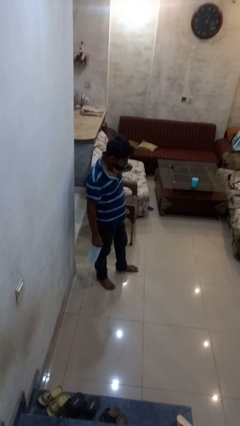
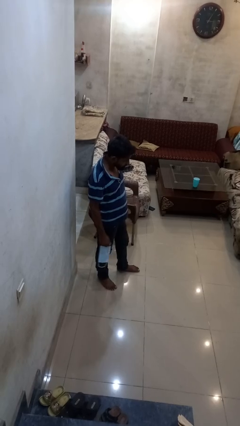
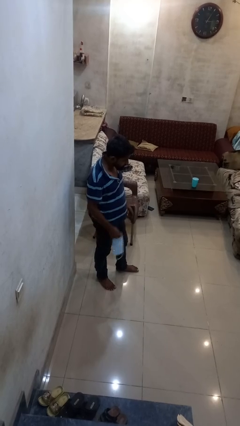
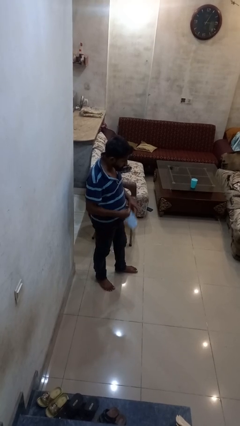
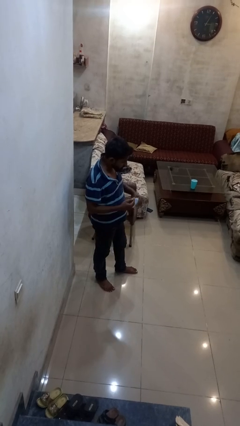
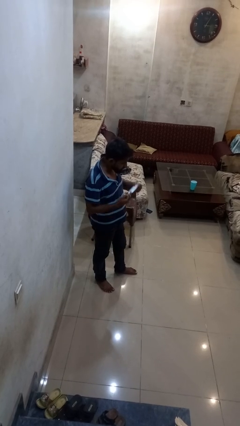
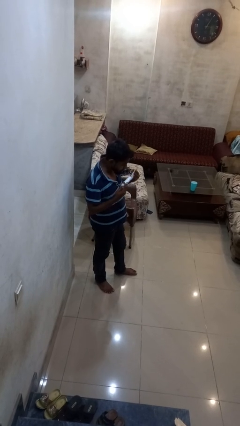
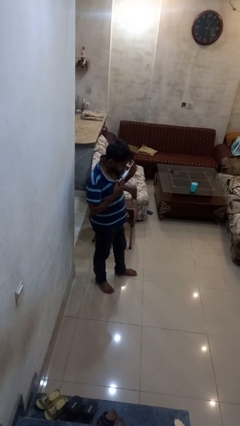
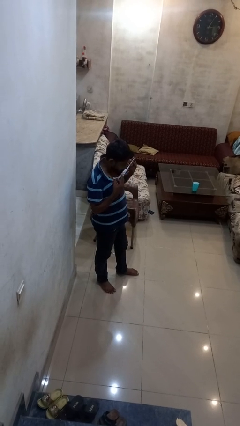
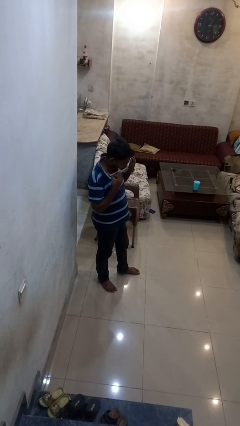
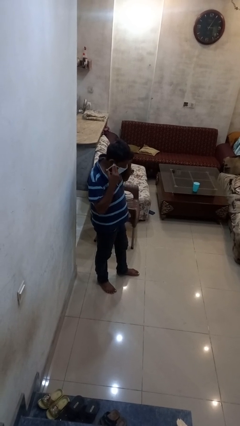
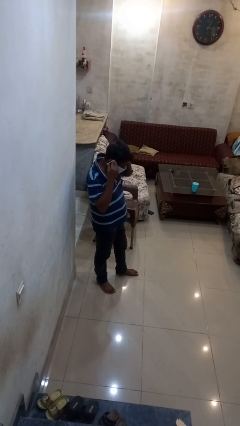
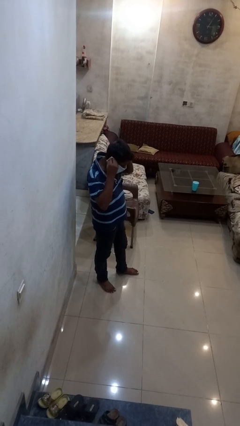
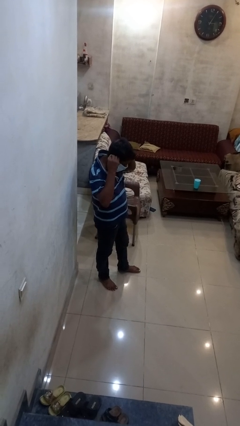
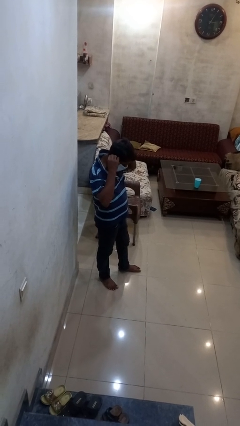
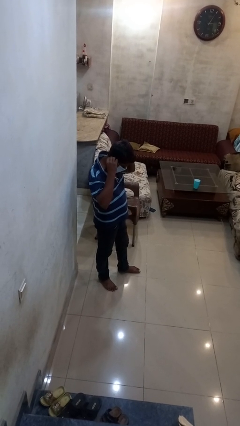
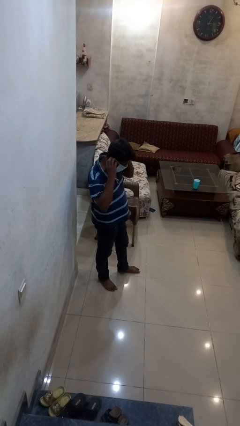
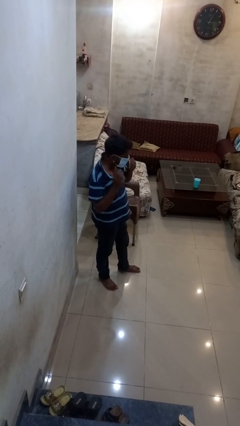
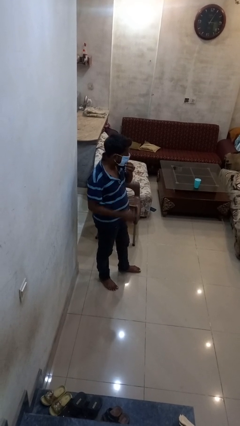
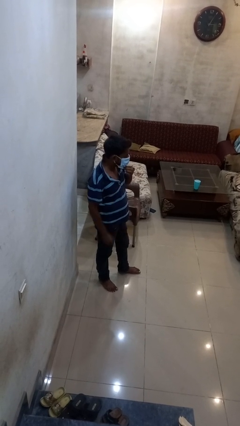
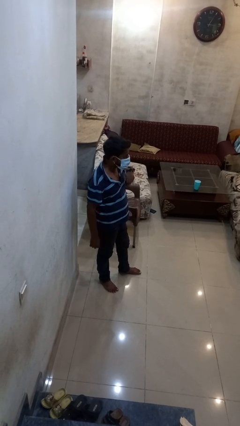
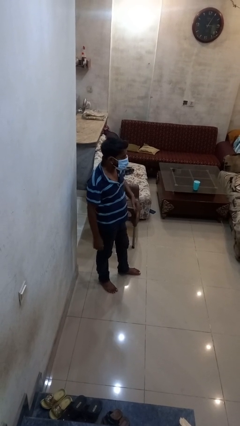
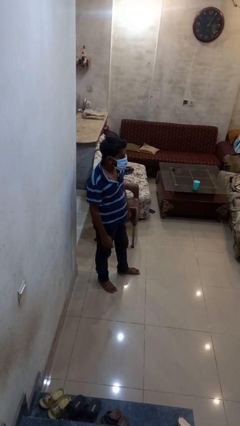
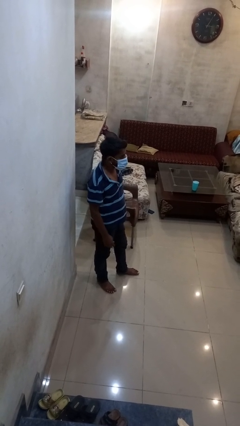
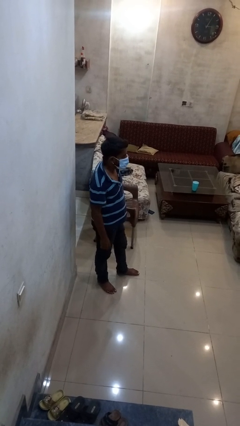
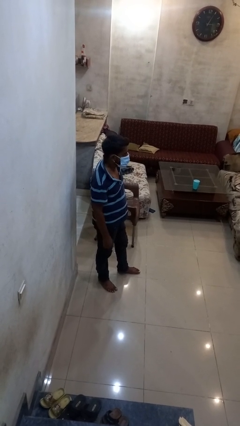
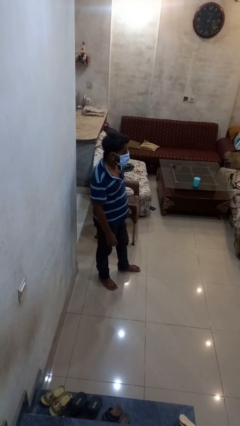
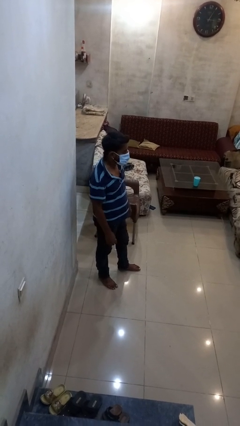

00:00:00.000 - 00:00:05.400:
person puts on facemask

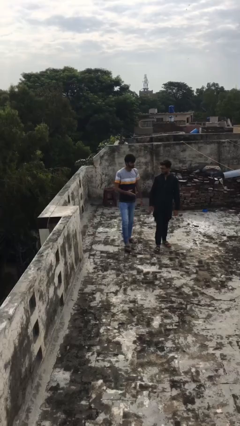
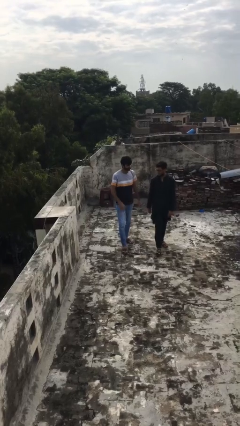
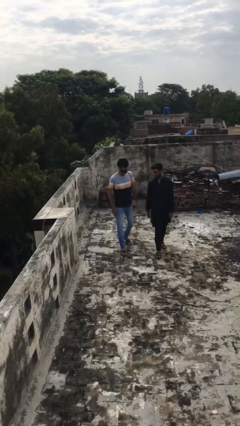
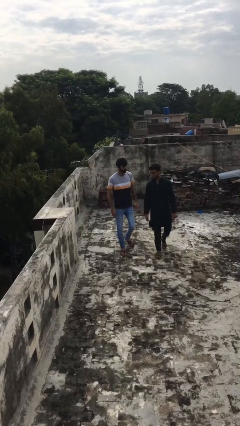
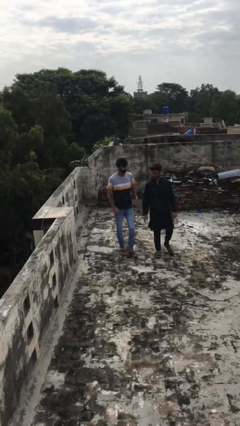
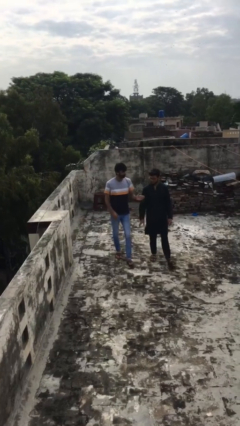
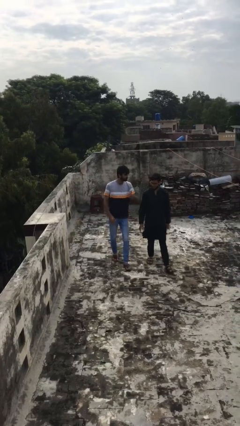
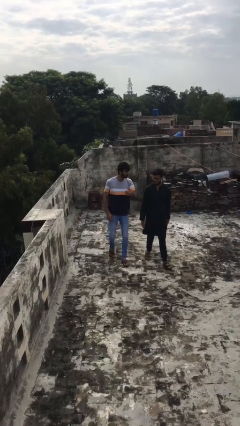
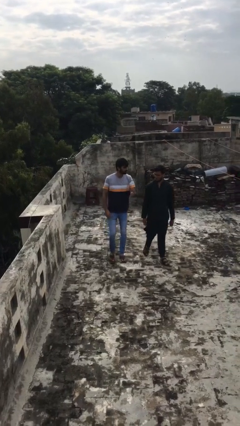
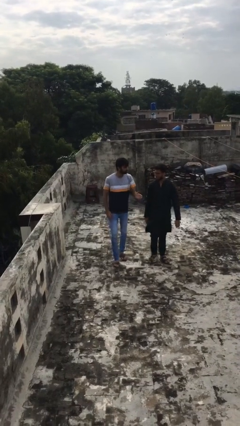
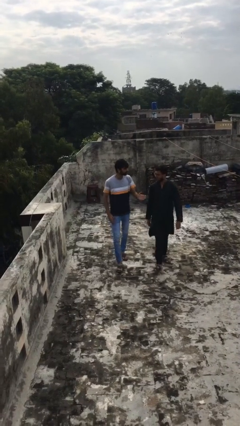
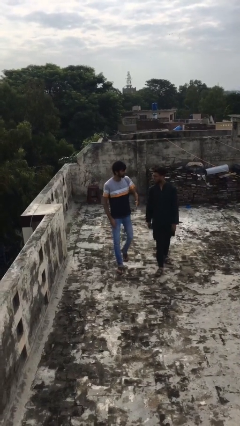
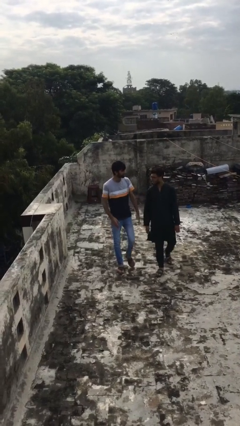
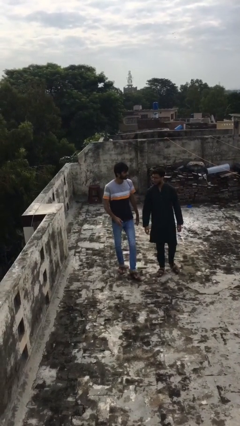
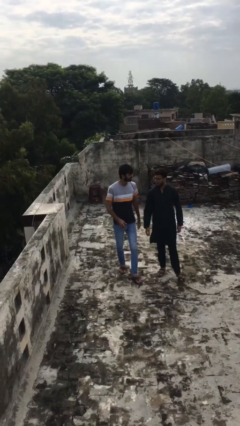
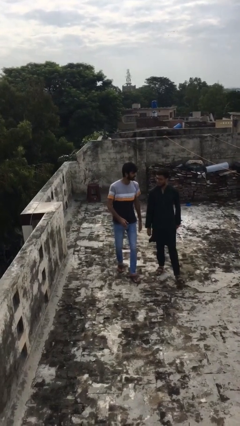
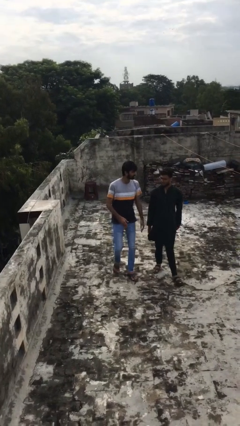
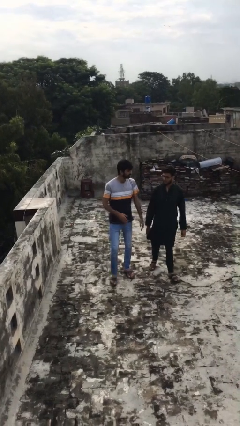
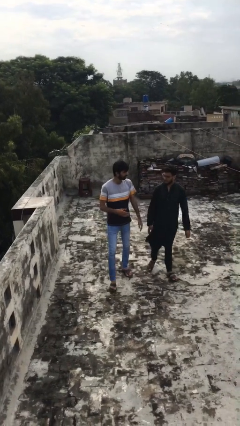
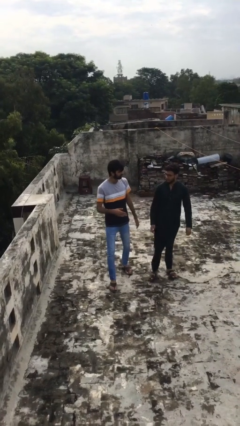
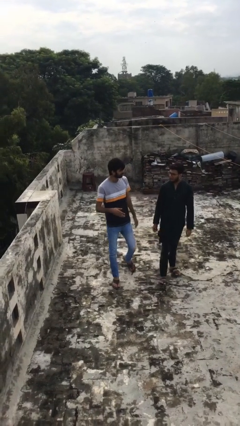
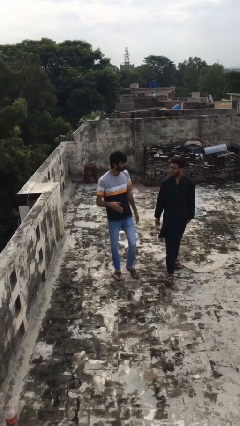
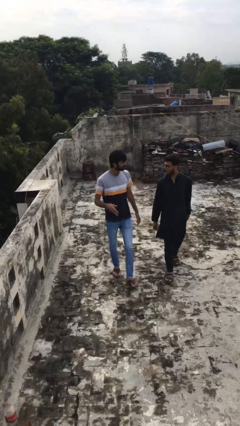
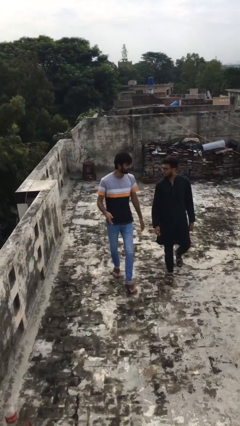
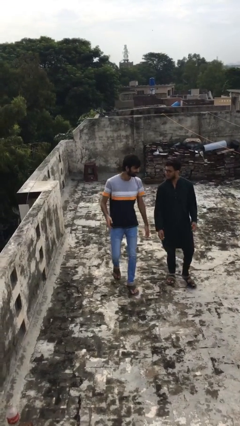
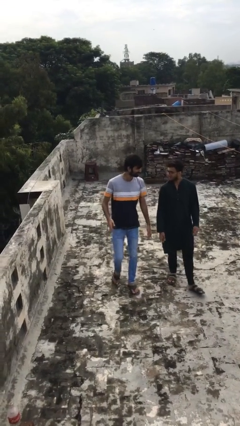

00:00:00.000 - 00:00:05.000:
person talks to person

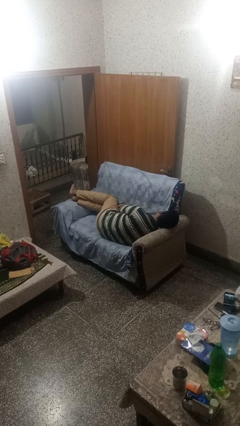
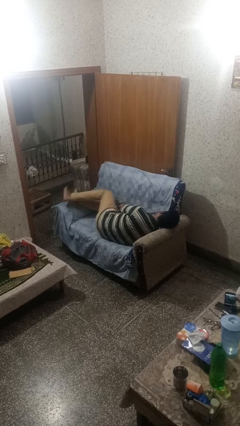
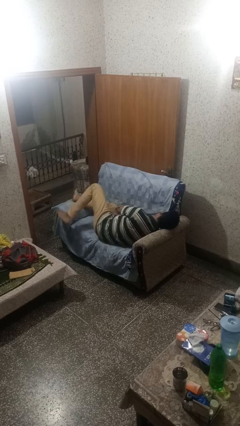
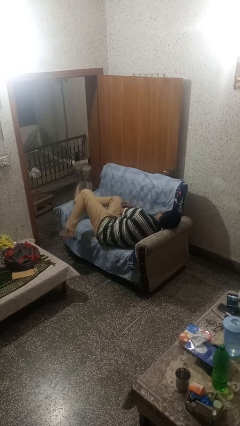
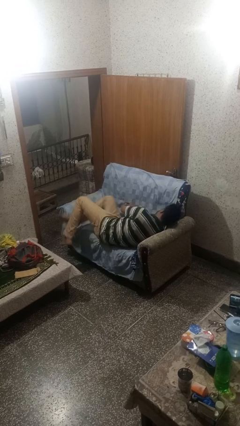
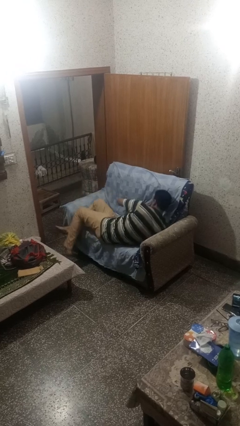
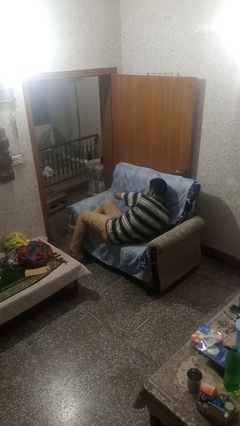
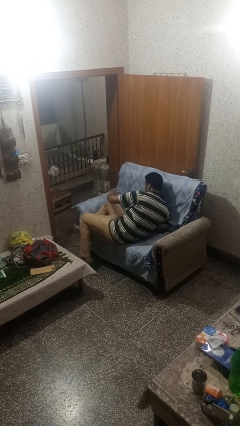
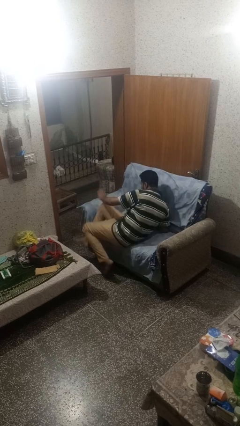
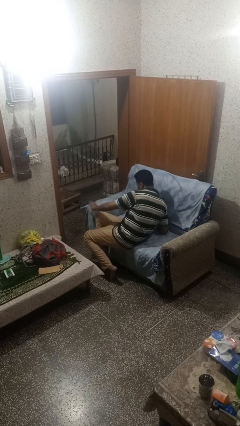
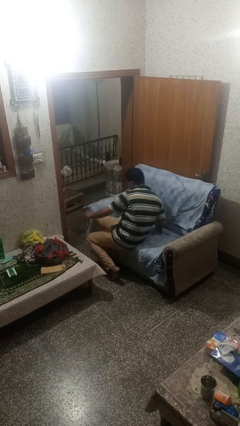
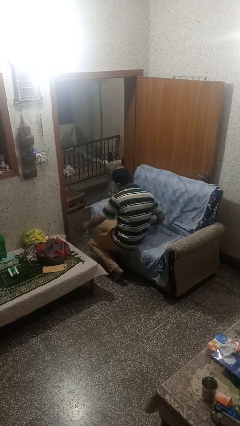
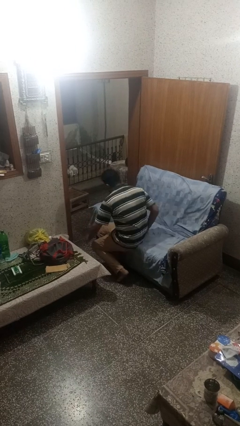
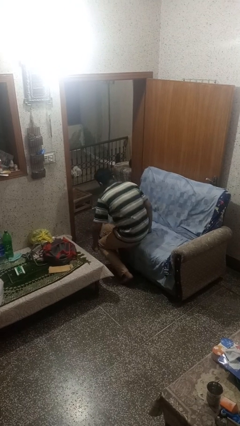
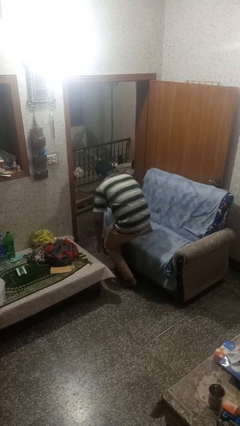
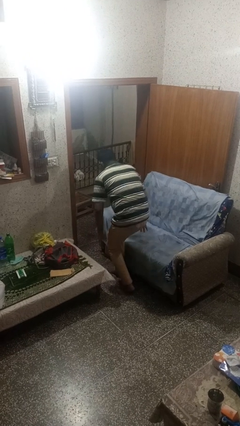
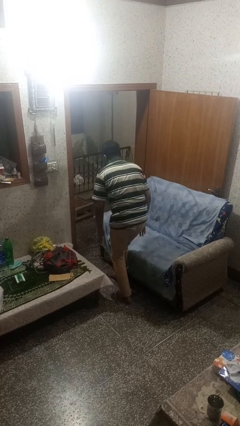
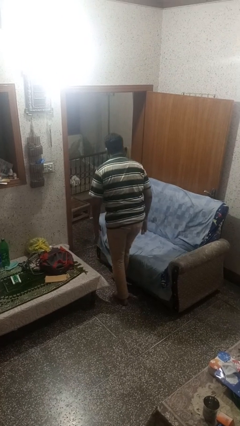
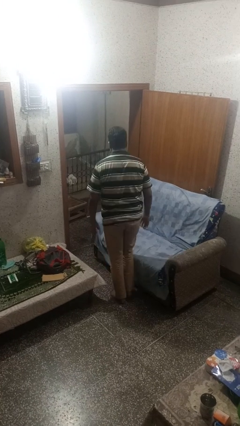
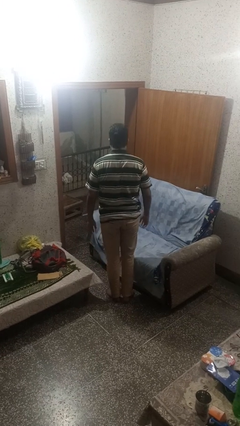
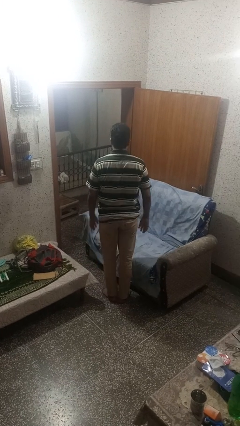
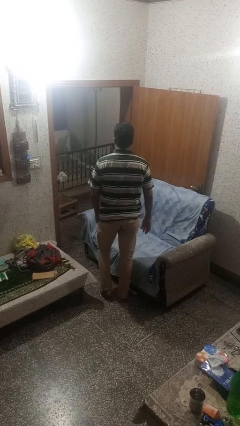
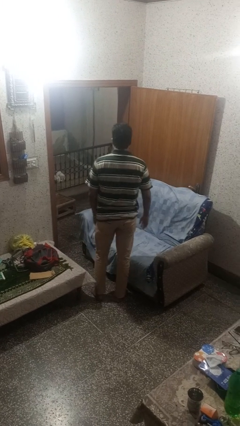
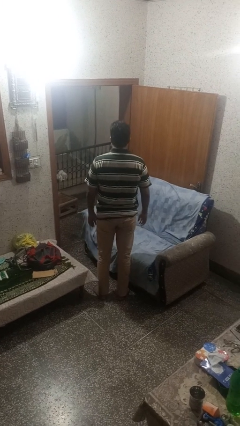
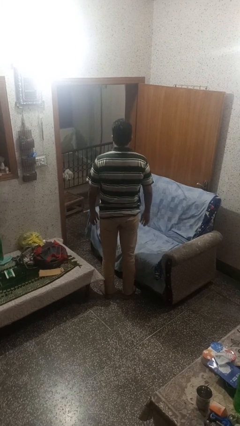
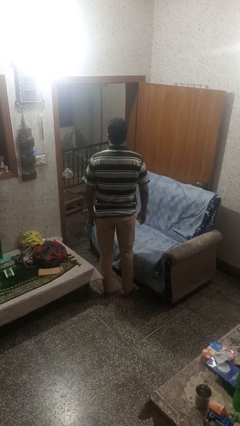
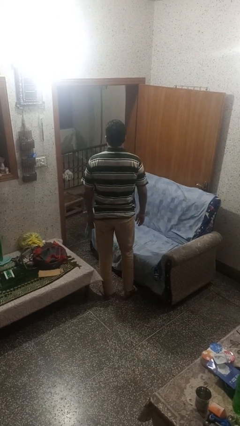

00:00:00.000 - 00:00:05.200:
person stands up

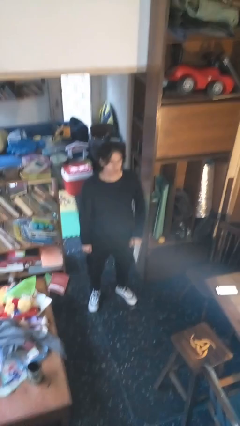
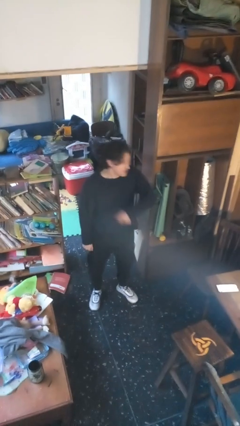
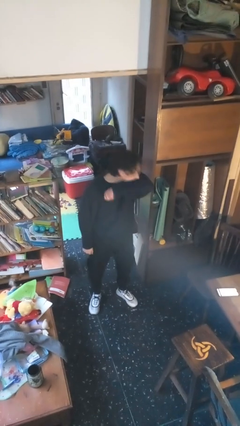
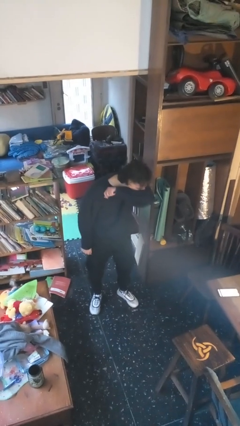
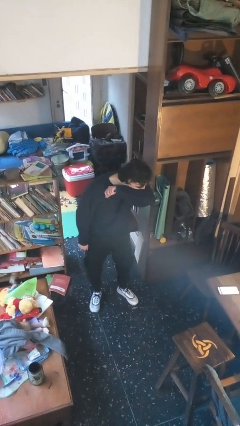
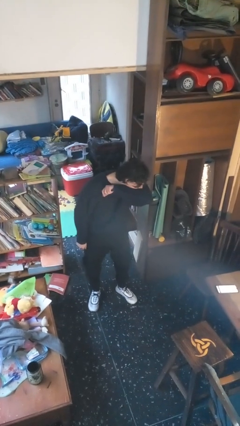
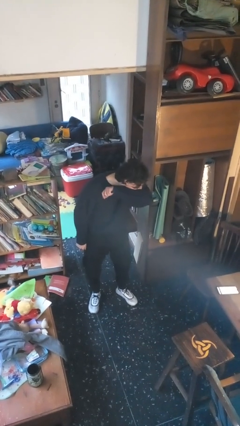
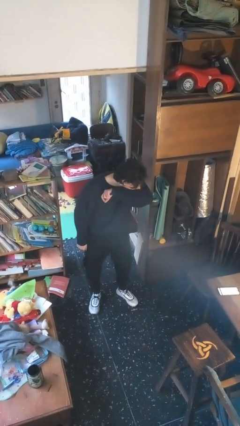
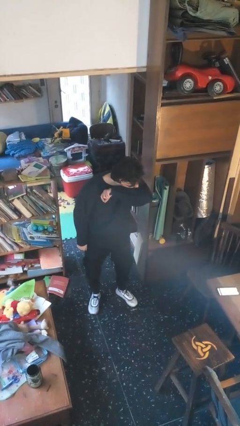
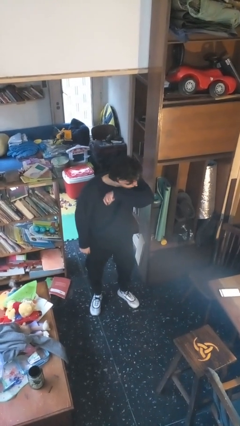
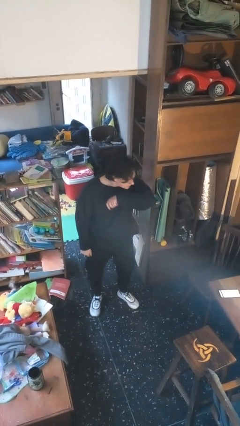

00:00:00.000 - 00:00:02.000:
person sneezes into arm

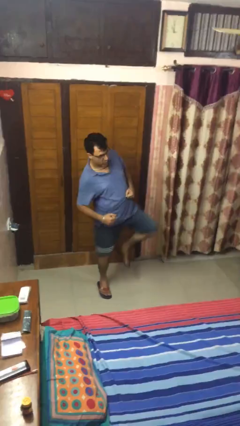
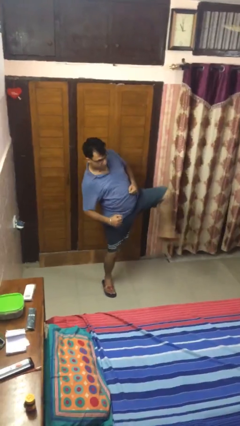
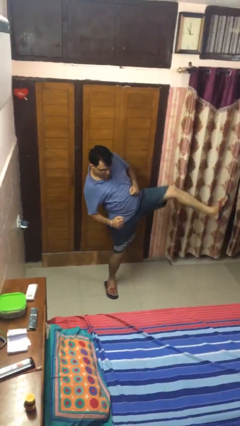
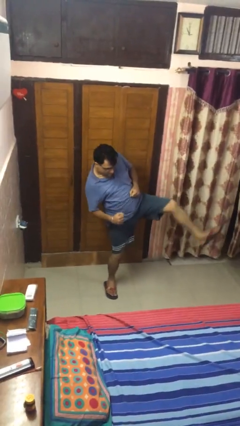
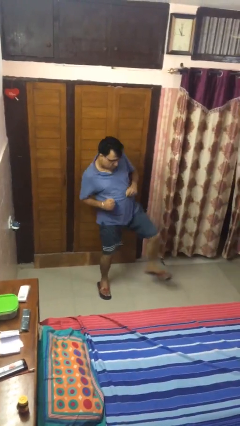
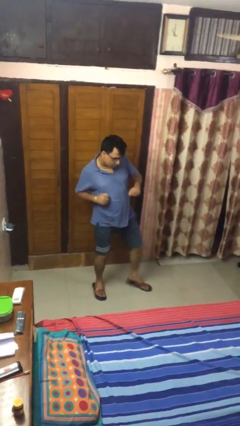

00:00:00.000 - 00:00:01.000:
person karate kicks
